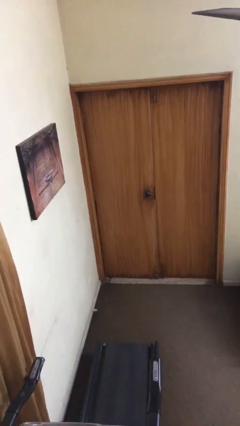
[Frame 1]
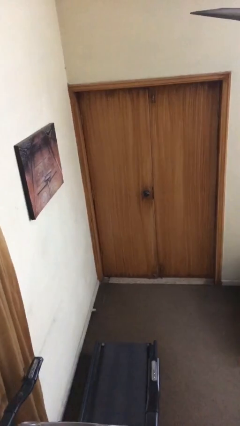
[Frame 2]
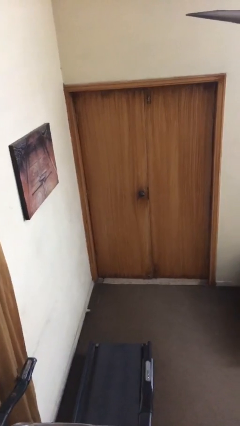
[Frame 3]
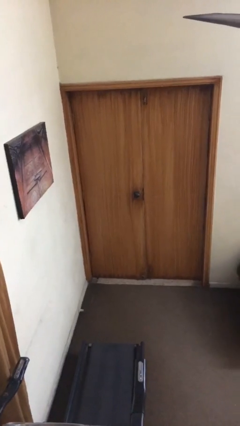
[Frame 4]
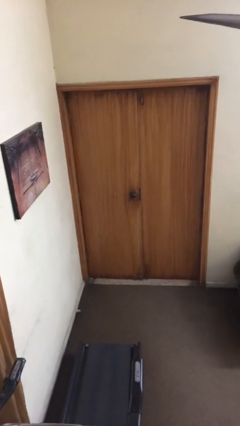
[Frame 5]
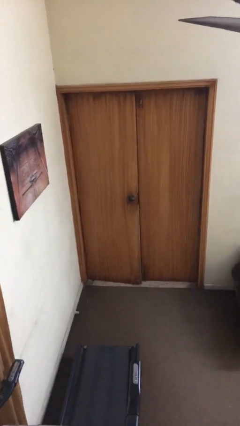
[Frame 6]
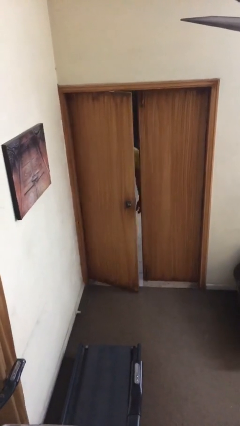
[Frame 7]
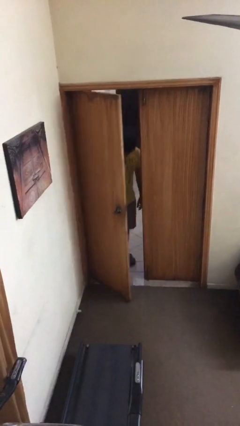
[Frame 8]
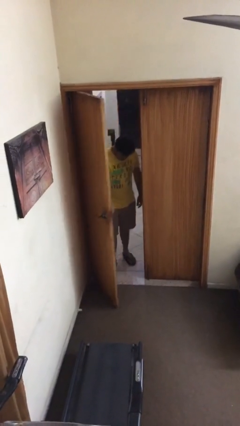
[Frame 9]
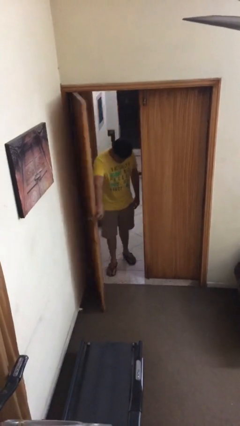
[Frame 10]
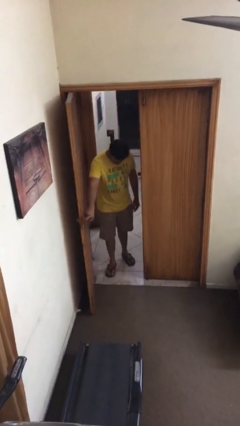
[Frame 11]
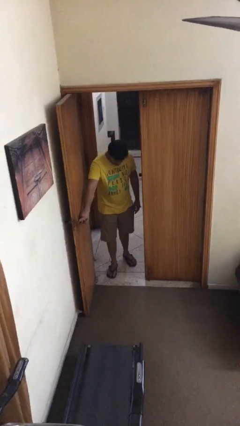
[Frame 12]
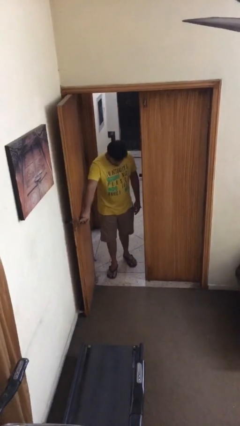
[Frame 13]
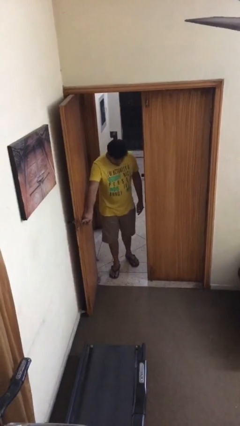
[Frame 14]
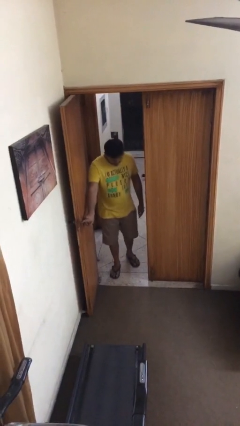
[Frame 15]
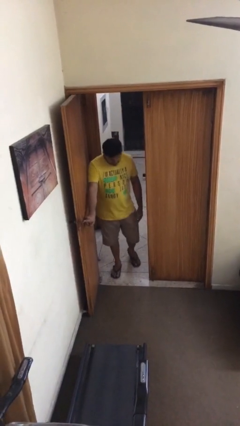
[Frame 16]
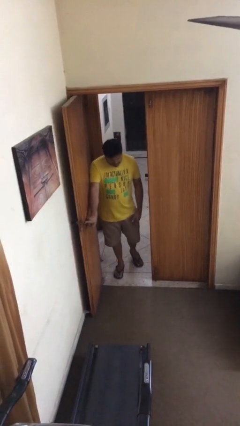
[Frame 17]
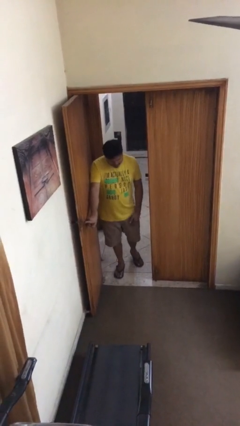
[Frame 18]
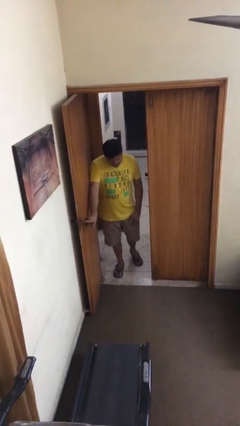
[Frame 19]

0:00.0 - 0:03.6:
person opens facility door

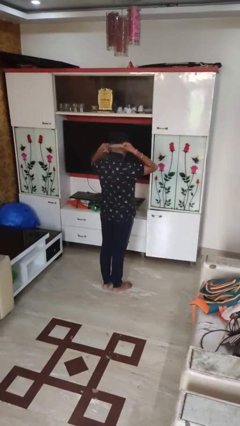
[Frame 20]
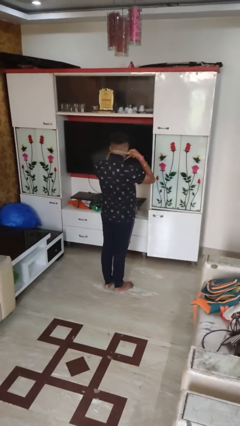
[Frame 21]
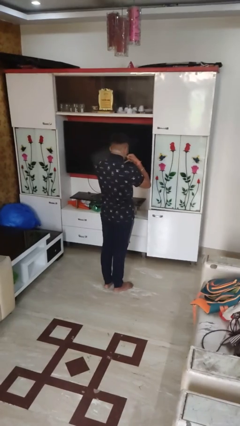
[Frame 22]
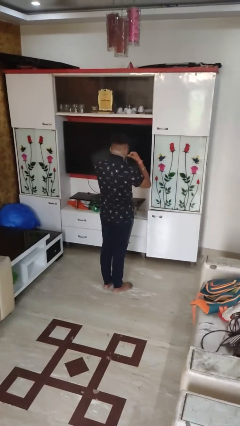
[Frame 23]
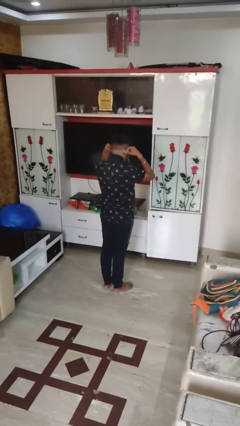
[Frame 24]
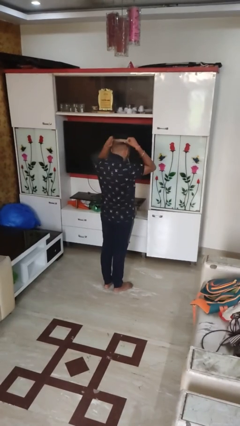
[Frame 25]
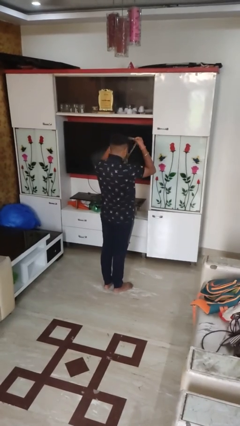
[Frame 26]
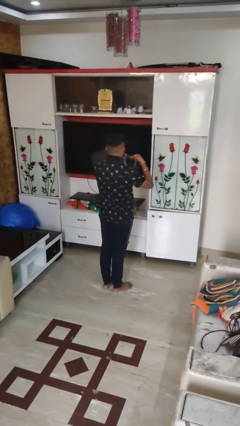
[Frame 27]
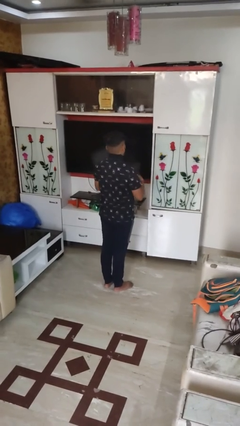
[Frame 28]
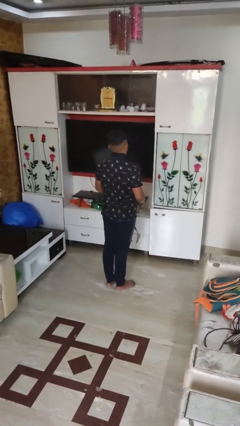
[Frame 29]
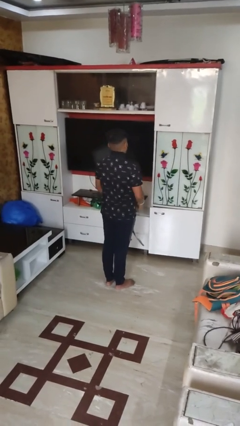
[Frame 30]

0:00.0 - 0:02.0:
person takes off necktie

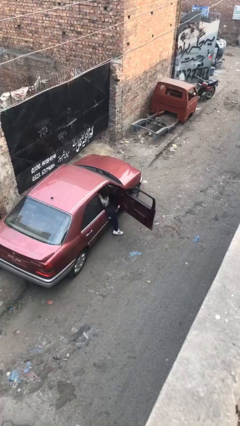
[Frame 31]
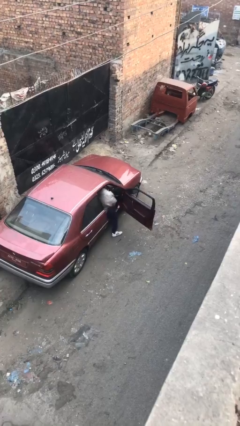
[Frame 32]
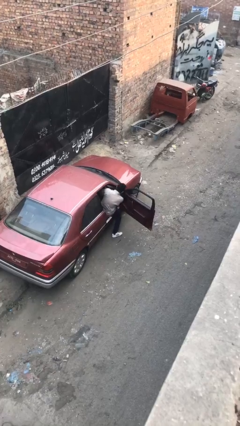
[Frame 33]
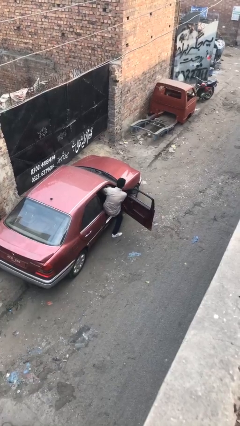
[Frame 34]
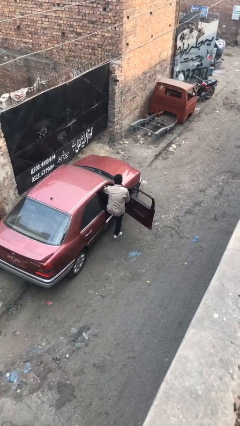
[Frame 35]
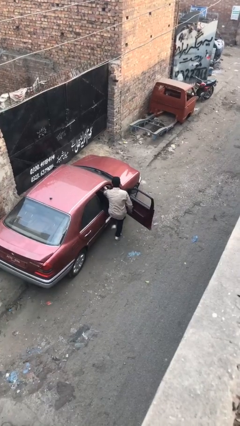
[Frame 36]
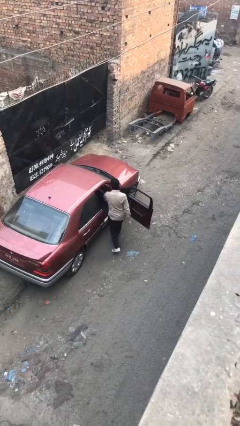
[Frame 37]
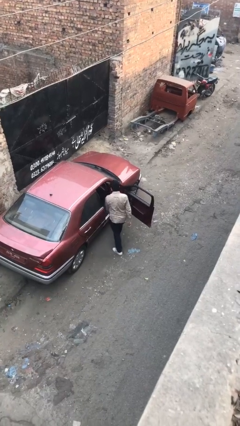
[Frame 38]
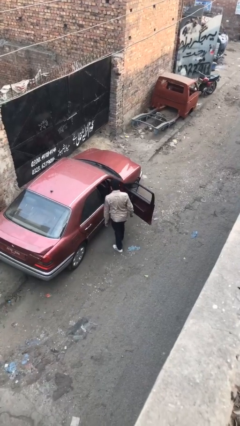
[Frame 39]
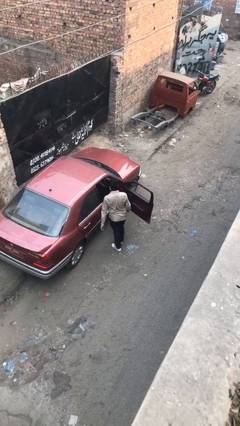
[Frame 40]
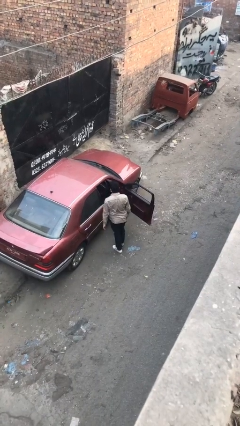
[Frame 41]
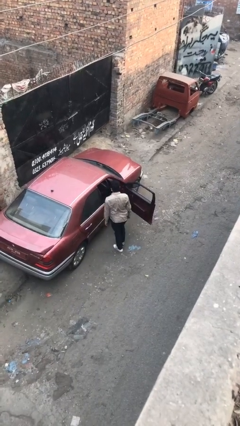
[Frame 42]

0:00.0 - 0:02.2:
person exits car

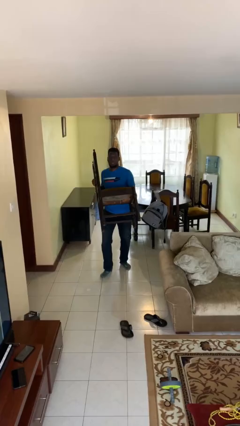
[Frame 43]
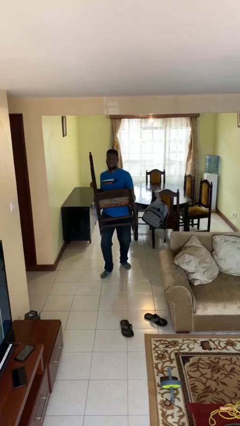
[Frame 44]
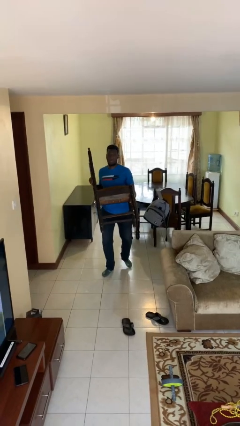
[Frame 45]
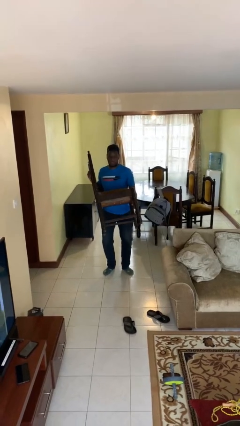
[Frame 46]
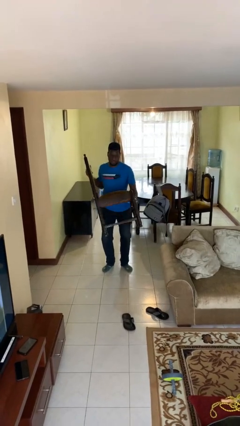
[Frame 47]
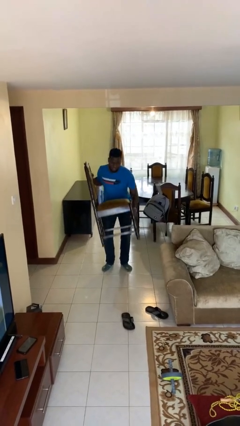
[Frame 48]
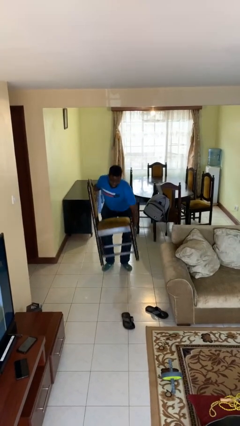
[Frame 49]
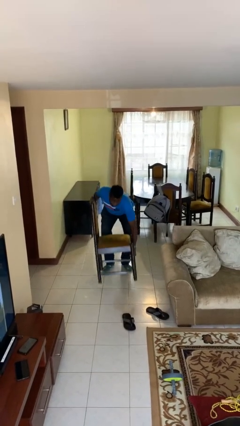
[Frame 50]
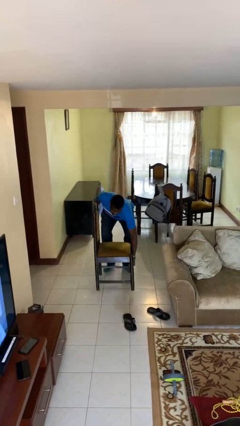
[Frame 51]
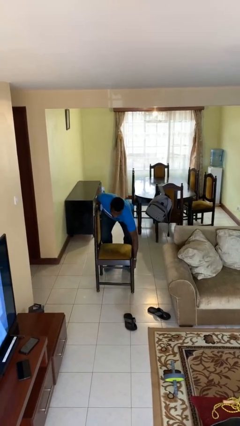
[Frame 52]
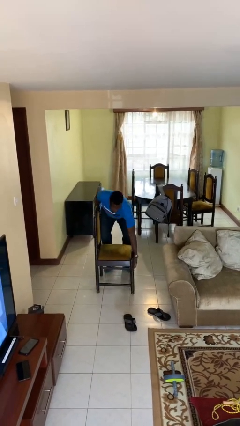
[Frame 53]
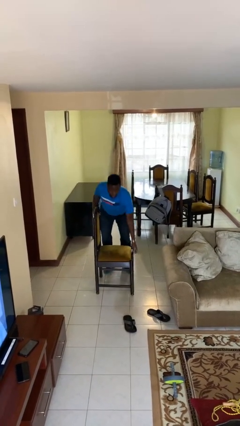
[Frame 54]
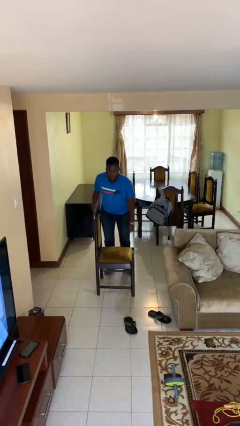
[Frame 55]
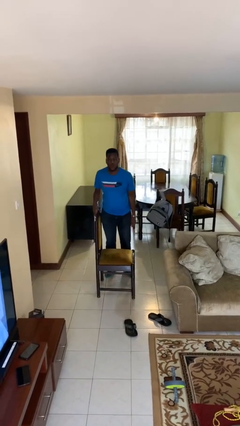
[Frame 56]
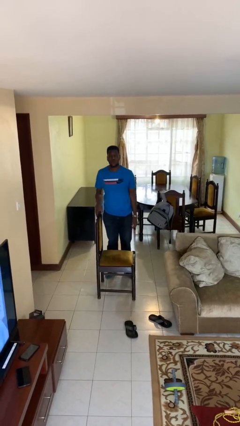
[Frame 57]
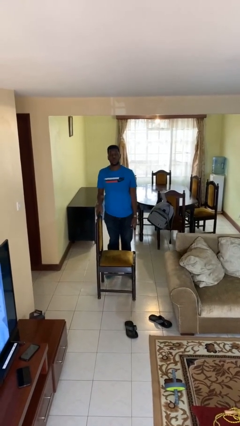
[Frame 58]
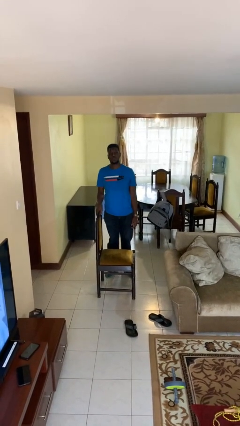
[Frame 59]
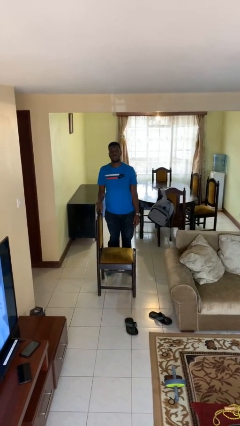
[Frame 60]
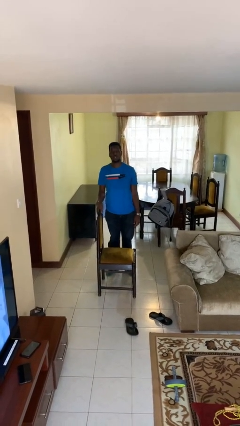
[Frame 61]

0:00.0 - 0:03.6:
person puts down object on floor

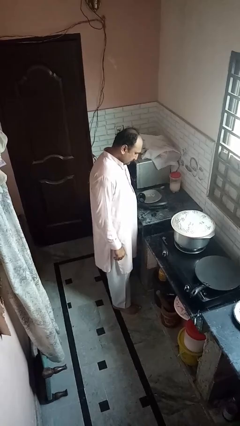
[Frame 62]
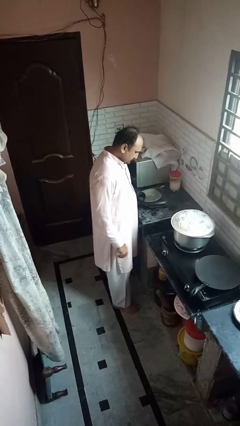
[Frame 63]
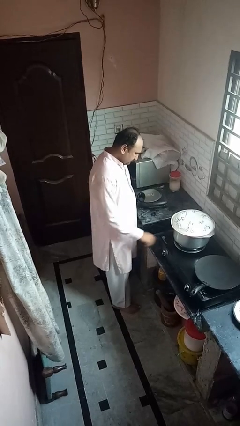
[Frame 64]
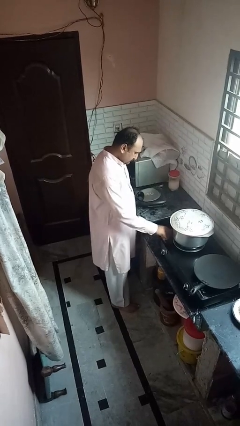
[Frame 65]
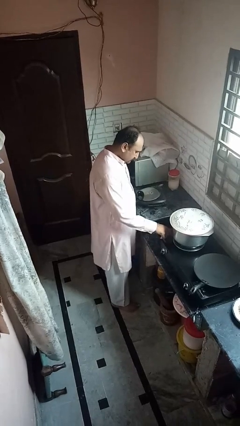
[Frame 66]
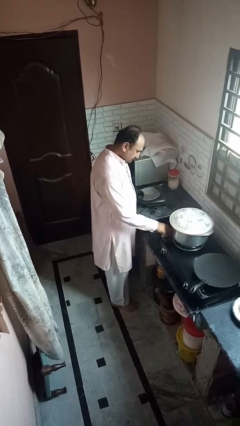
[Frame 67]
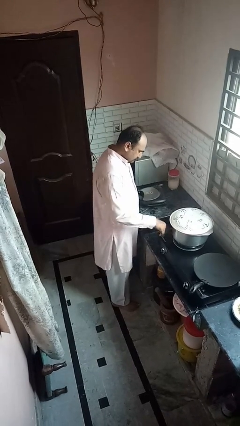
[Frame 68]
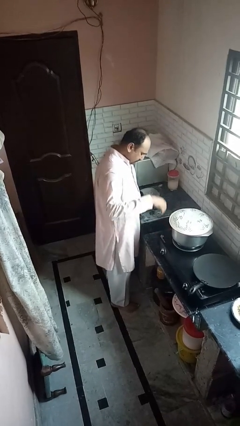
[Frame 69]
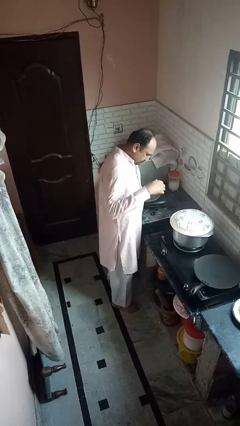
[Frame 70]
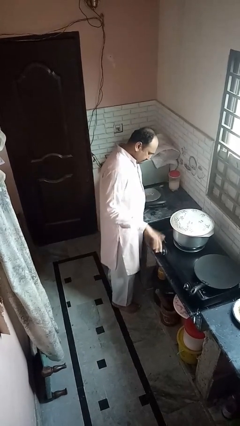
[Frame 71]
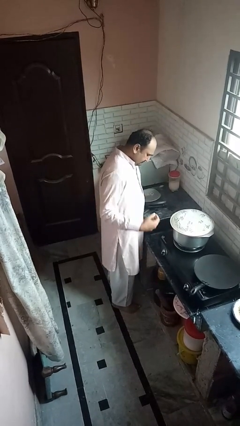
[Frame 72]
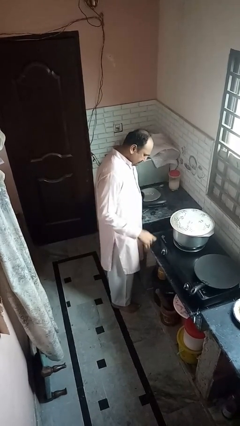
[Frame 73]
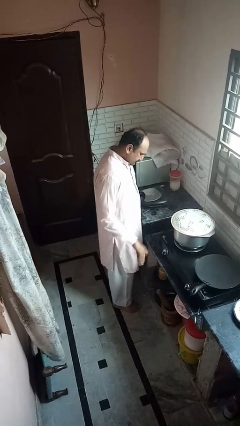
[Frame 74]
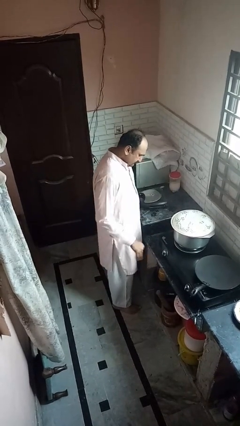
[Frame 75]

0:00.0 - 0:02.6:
person burns hand

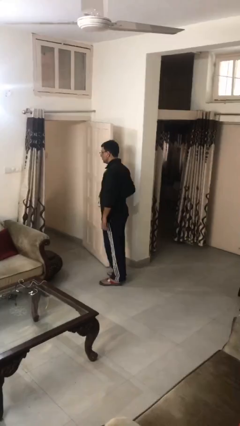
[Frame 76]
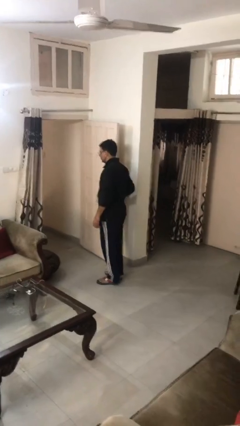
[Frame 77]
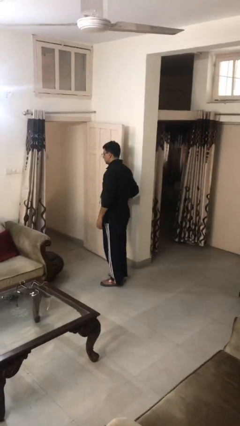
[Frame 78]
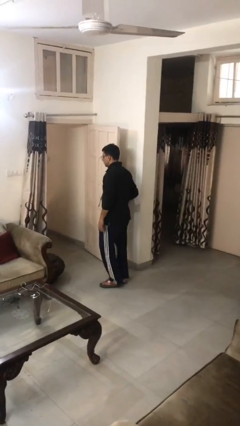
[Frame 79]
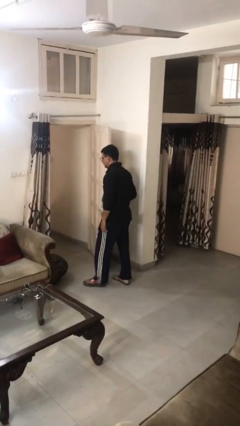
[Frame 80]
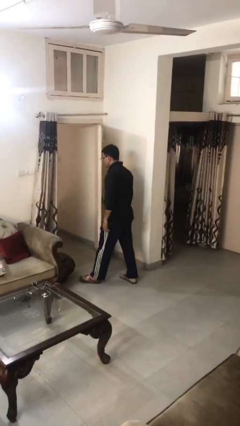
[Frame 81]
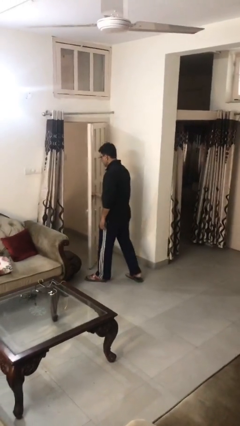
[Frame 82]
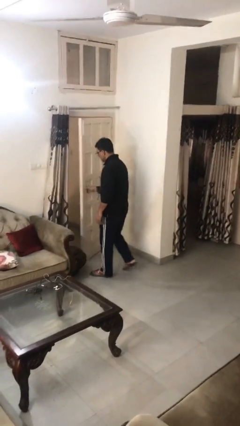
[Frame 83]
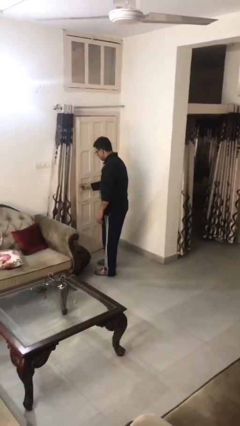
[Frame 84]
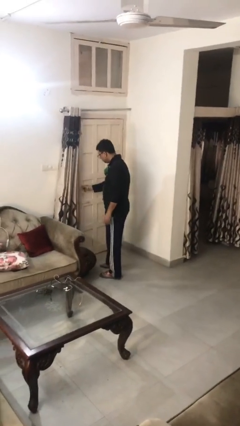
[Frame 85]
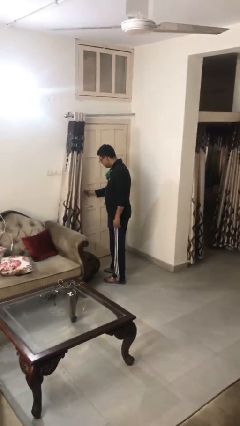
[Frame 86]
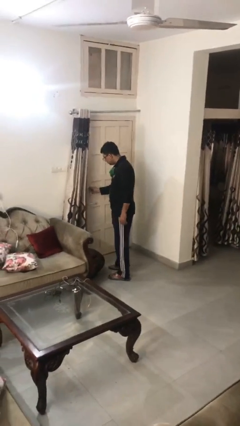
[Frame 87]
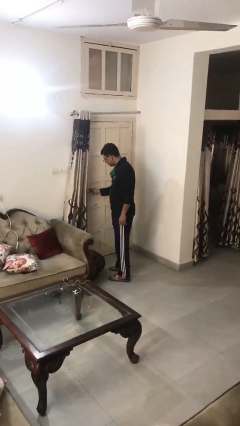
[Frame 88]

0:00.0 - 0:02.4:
person closes facility door

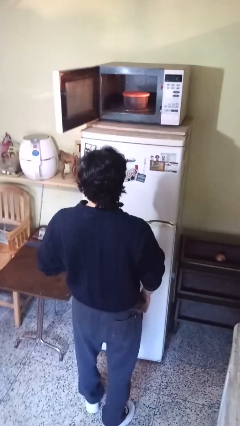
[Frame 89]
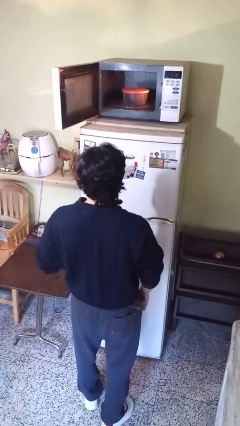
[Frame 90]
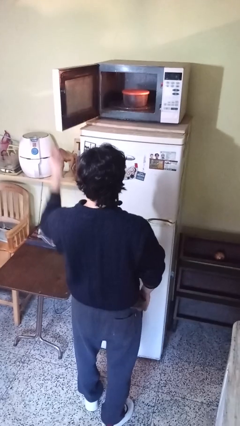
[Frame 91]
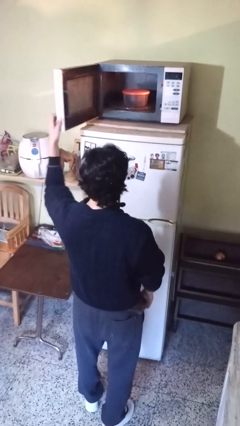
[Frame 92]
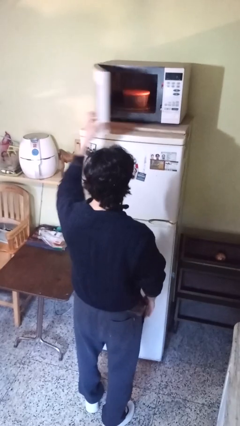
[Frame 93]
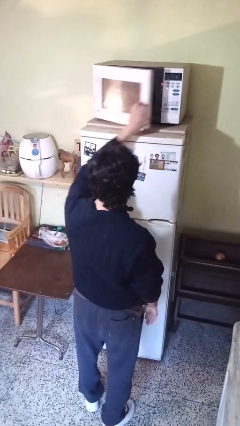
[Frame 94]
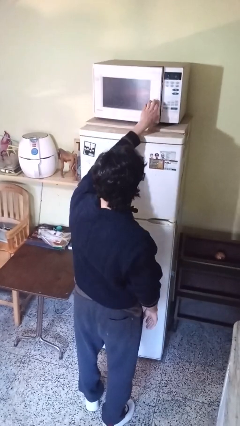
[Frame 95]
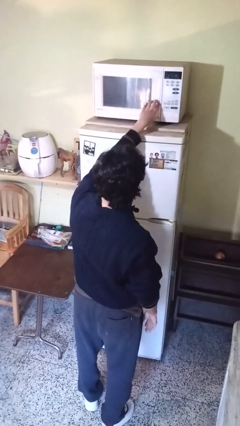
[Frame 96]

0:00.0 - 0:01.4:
person closes microwave
